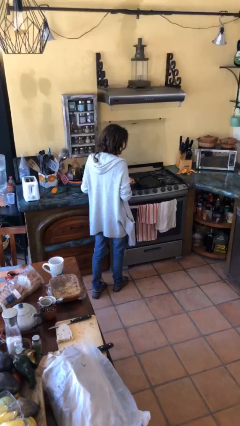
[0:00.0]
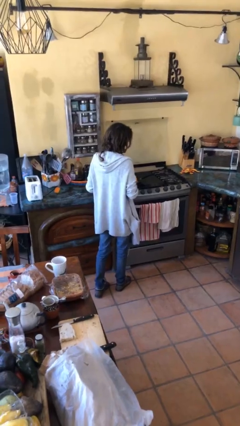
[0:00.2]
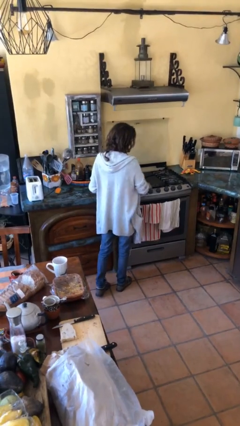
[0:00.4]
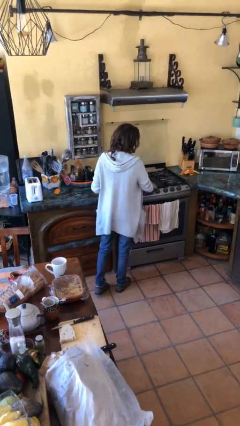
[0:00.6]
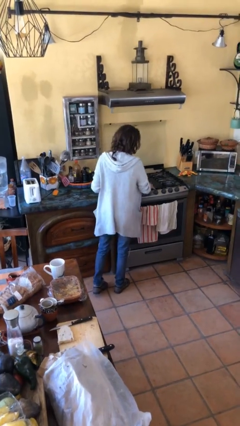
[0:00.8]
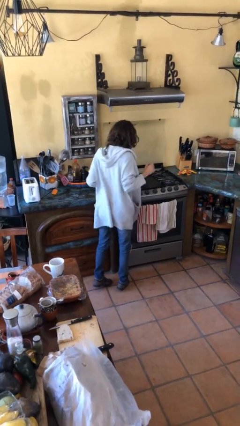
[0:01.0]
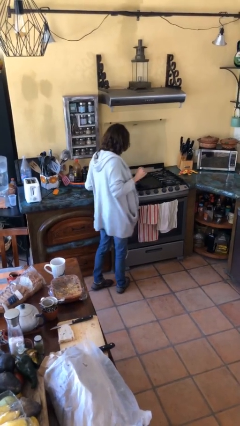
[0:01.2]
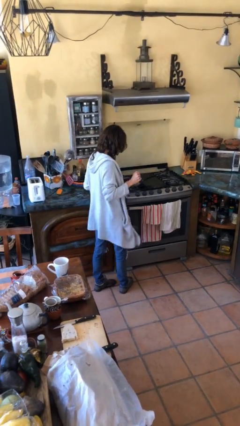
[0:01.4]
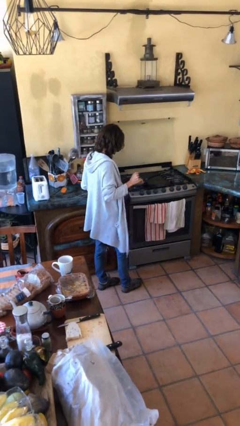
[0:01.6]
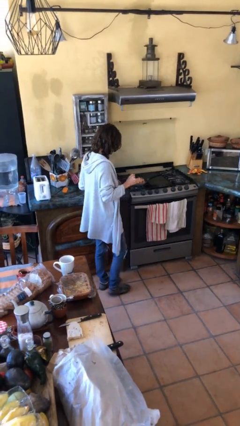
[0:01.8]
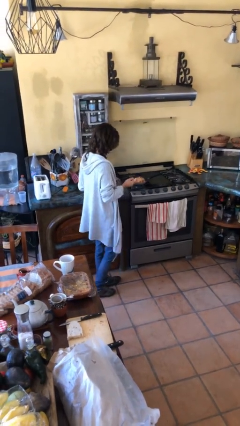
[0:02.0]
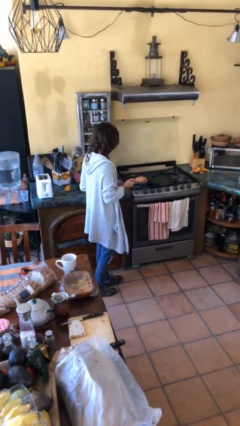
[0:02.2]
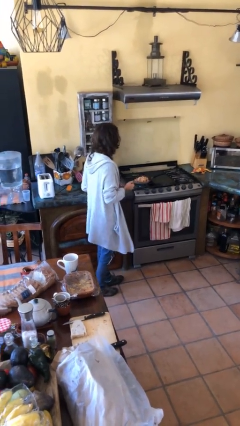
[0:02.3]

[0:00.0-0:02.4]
person burns hand

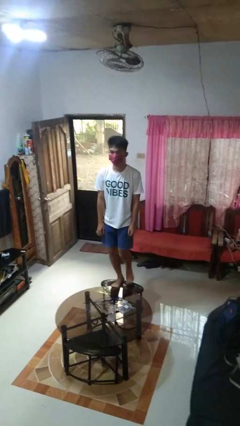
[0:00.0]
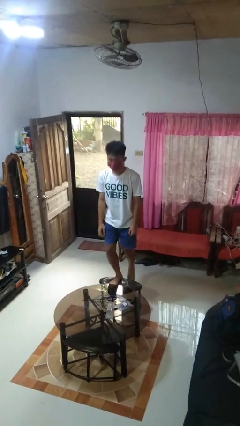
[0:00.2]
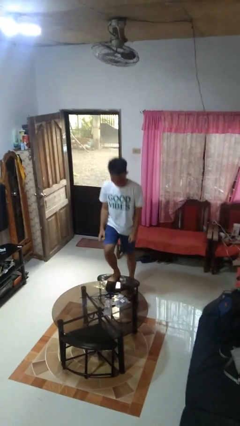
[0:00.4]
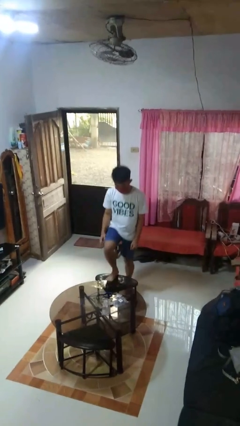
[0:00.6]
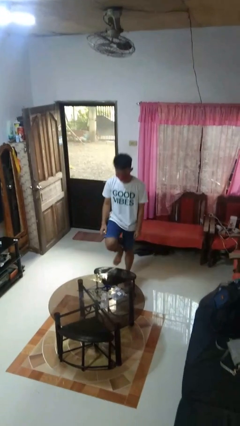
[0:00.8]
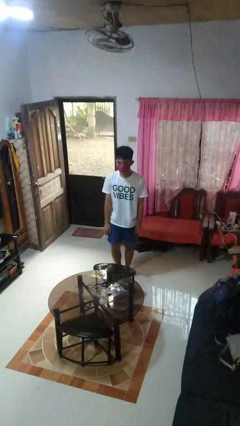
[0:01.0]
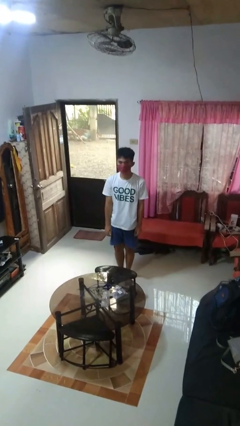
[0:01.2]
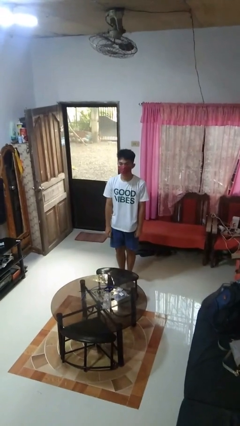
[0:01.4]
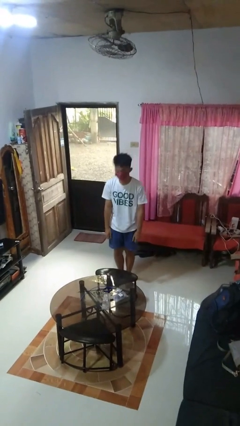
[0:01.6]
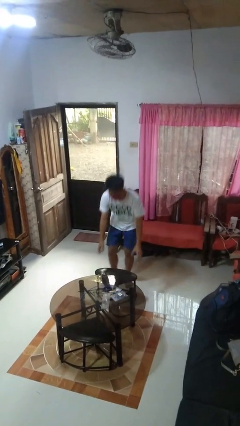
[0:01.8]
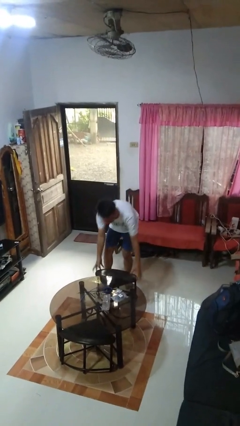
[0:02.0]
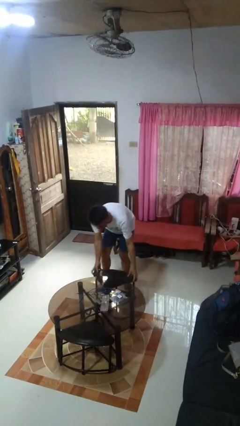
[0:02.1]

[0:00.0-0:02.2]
person climbs off chair

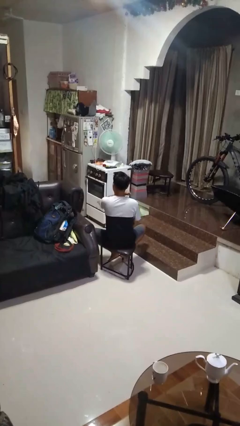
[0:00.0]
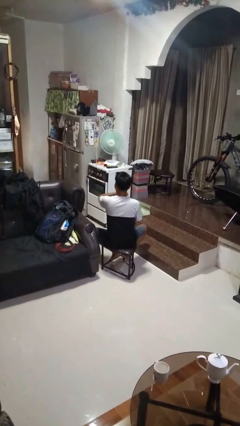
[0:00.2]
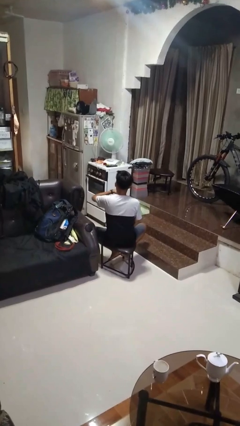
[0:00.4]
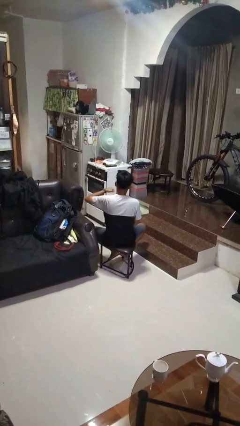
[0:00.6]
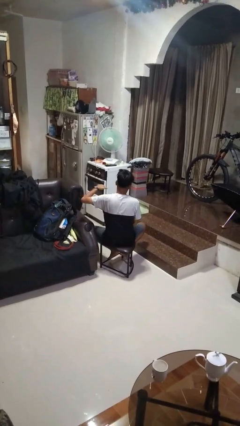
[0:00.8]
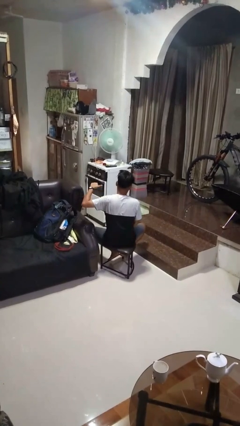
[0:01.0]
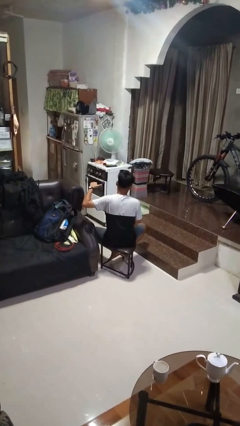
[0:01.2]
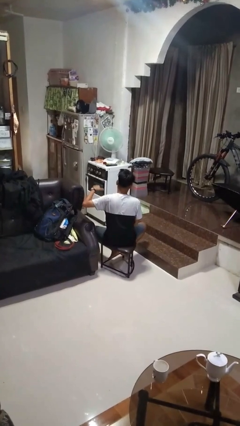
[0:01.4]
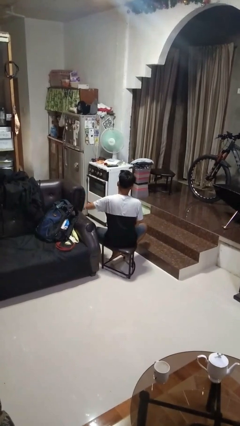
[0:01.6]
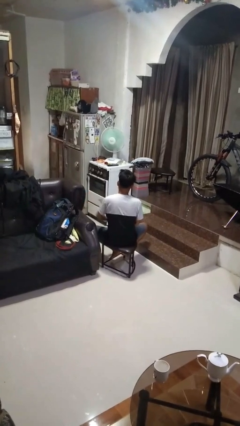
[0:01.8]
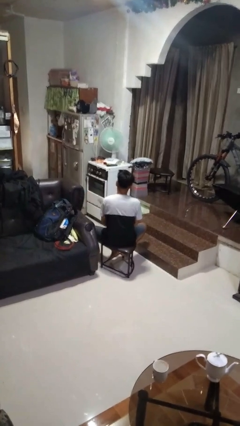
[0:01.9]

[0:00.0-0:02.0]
person gestures cut

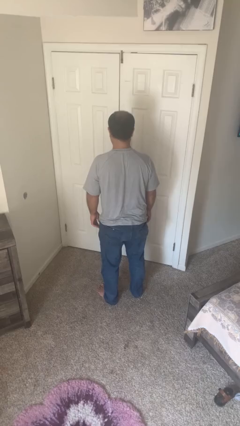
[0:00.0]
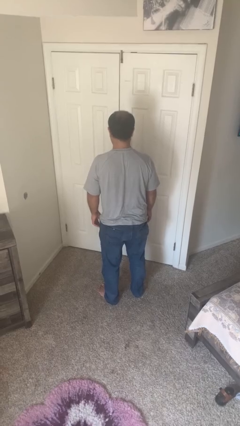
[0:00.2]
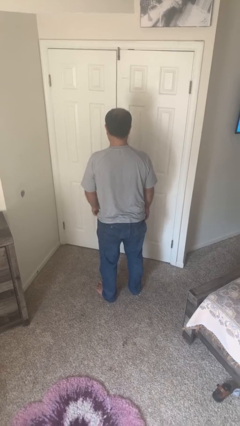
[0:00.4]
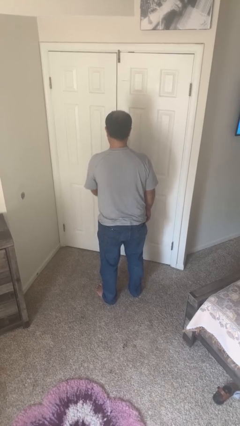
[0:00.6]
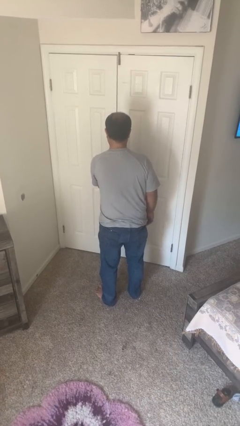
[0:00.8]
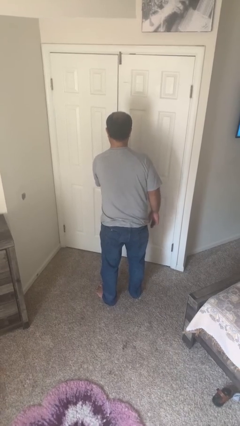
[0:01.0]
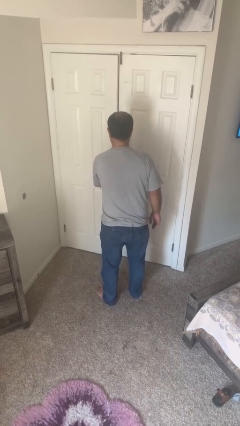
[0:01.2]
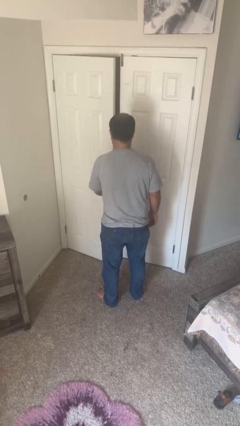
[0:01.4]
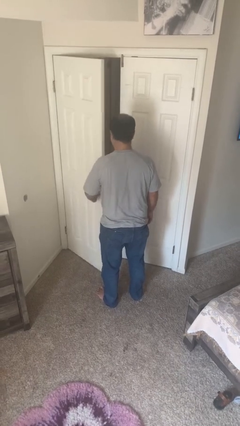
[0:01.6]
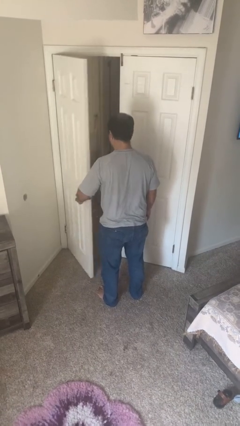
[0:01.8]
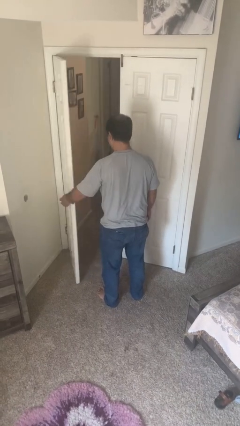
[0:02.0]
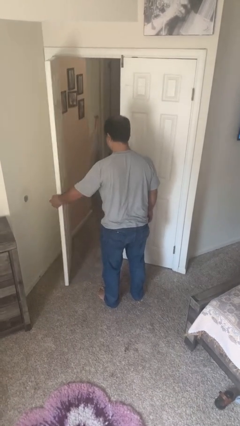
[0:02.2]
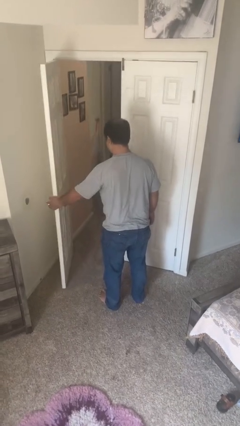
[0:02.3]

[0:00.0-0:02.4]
person opens facility door

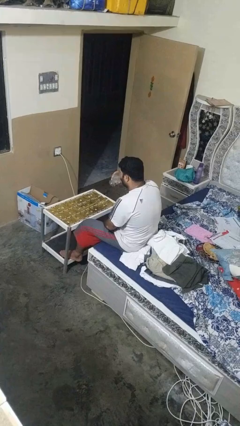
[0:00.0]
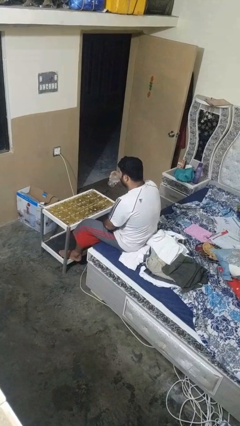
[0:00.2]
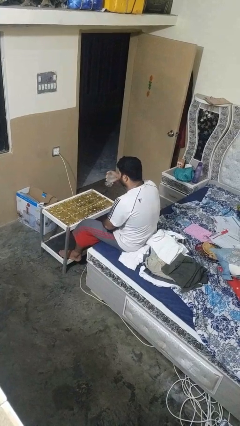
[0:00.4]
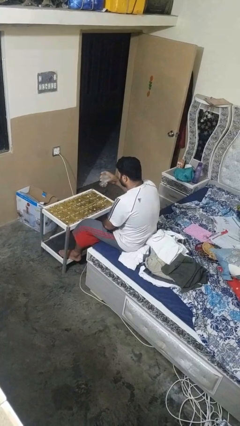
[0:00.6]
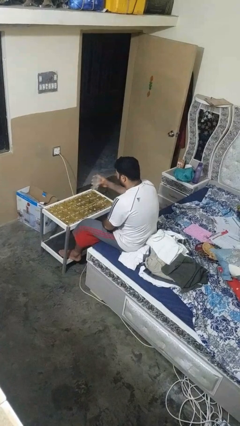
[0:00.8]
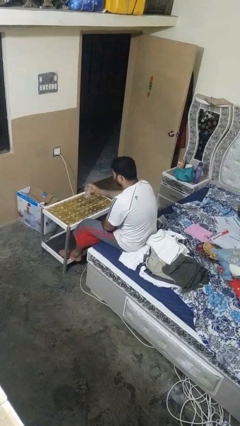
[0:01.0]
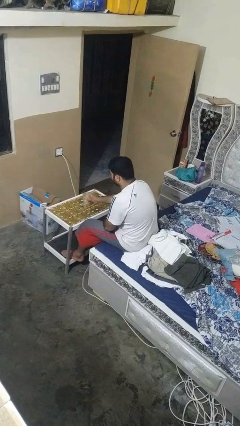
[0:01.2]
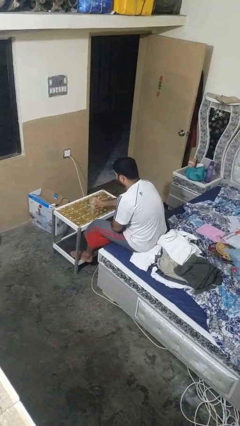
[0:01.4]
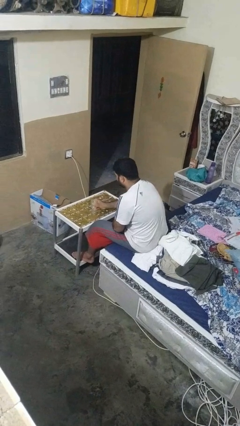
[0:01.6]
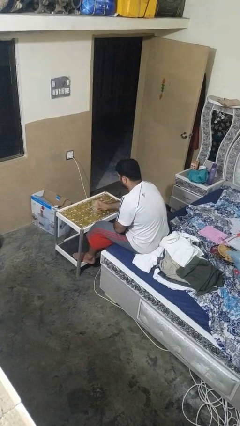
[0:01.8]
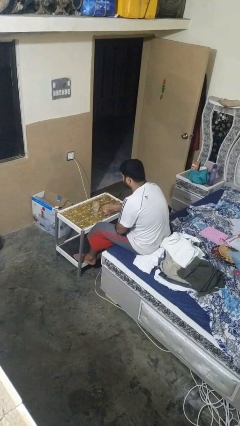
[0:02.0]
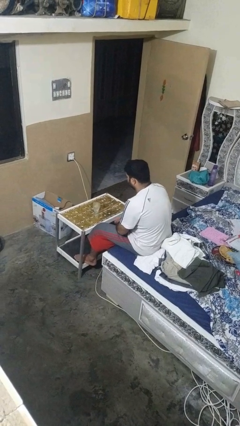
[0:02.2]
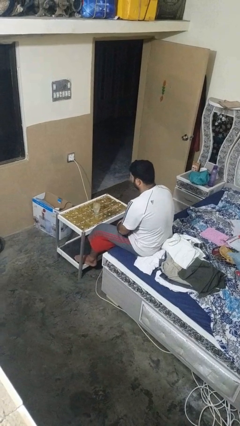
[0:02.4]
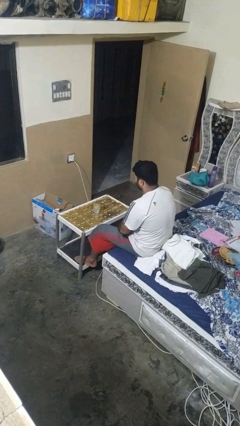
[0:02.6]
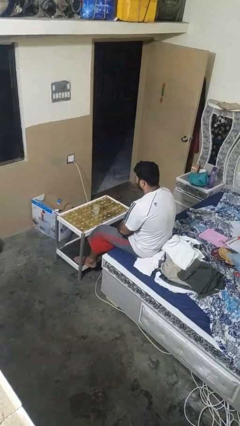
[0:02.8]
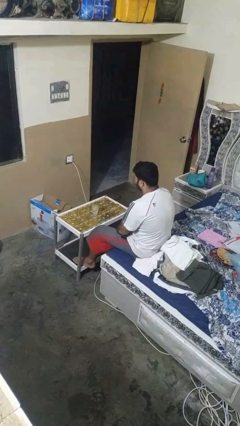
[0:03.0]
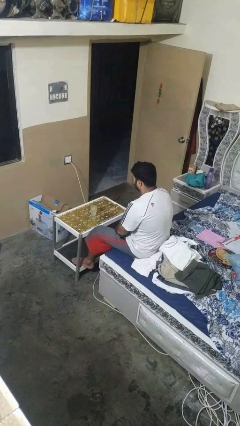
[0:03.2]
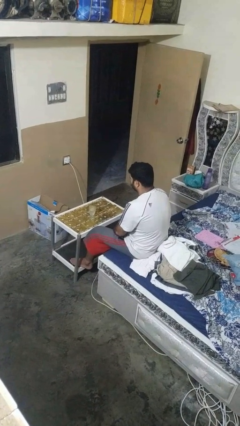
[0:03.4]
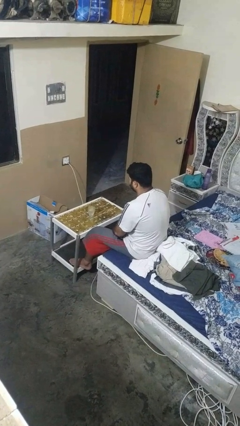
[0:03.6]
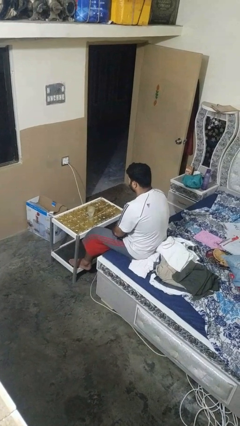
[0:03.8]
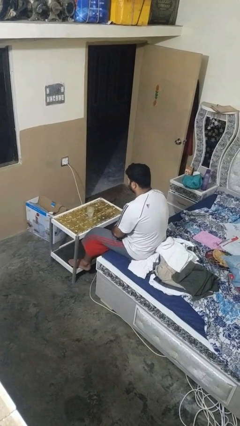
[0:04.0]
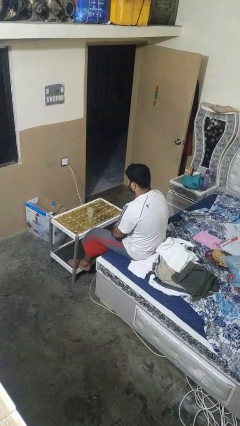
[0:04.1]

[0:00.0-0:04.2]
person puts down object on table

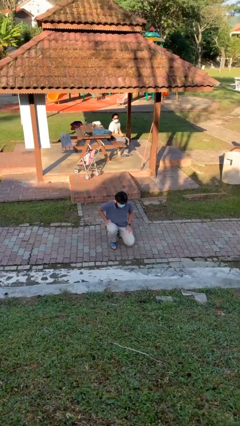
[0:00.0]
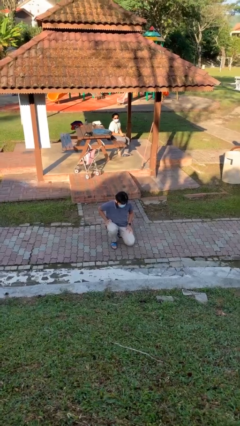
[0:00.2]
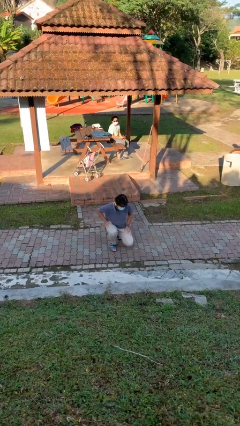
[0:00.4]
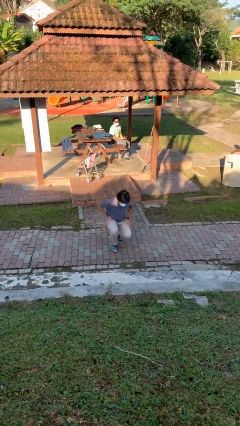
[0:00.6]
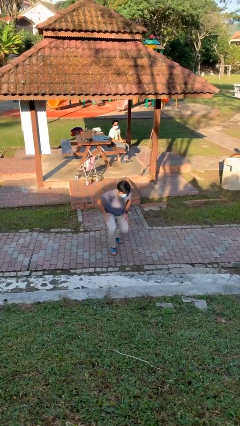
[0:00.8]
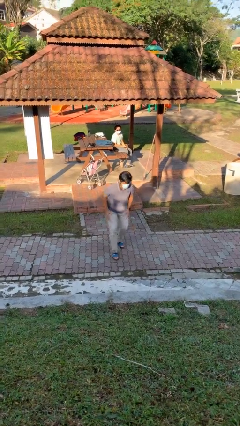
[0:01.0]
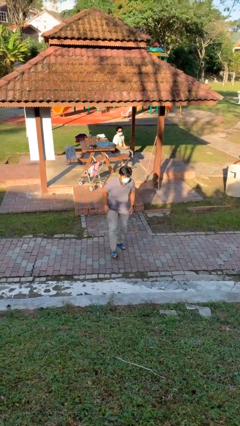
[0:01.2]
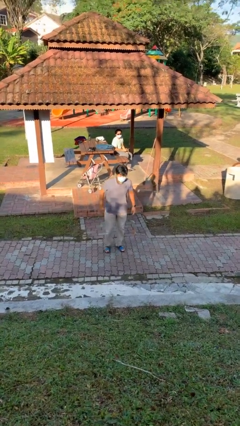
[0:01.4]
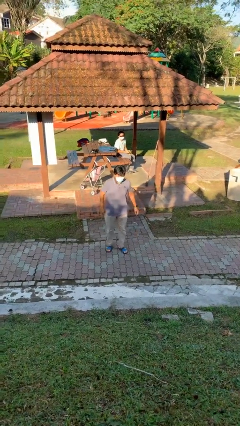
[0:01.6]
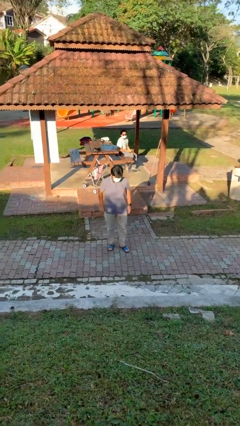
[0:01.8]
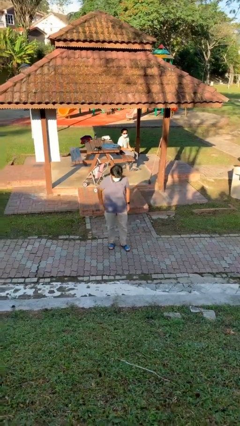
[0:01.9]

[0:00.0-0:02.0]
person stands up from floor

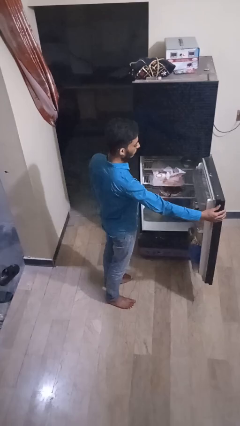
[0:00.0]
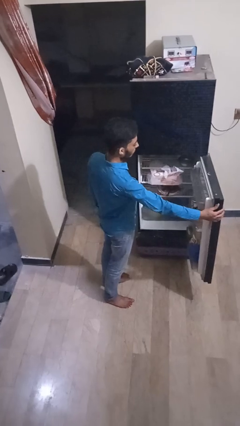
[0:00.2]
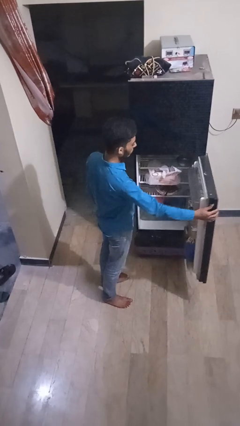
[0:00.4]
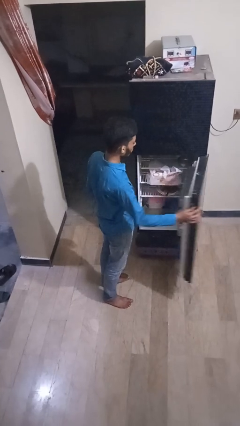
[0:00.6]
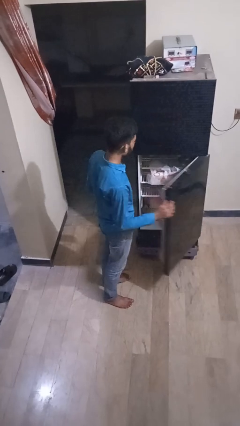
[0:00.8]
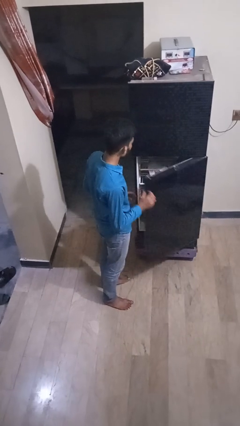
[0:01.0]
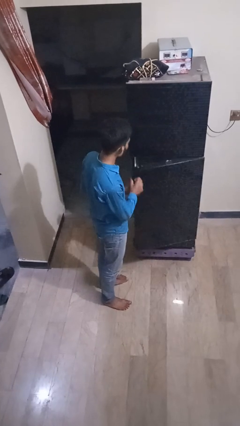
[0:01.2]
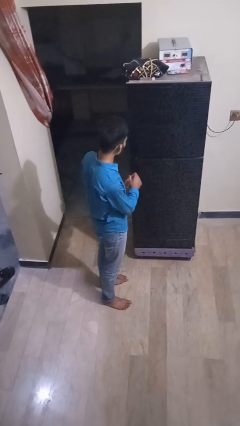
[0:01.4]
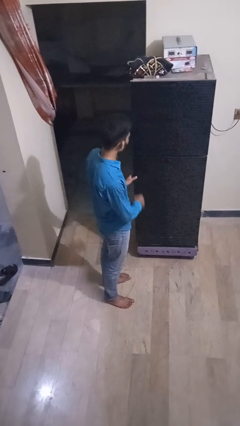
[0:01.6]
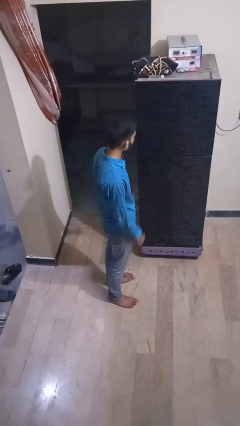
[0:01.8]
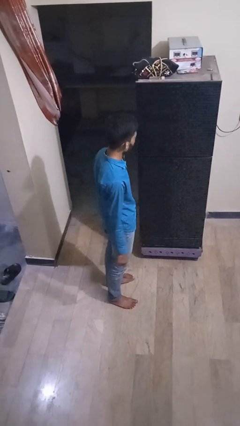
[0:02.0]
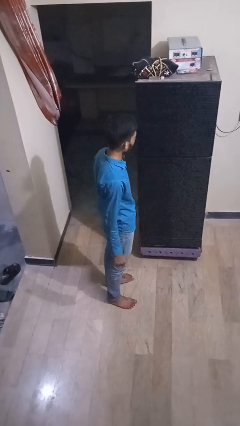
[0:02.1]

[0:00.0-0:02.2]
person closes refrigerator
